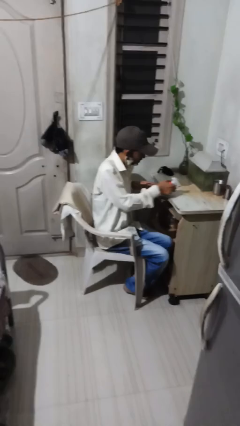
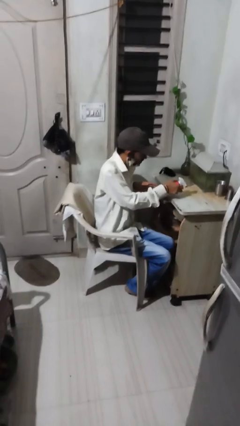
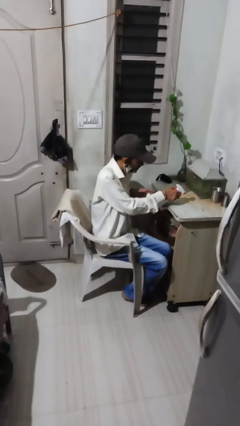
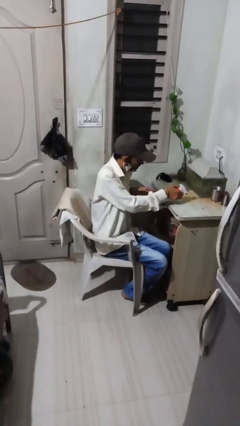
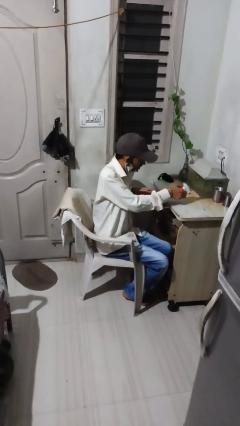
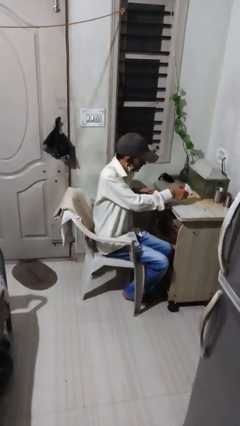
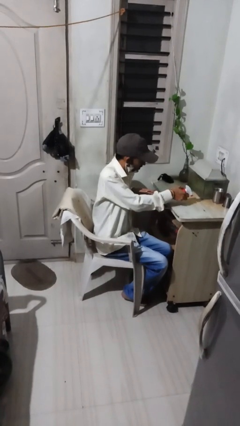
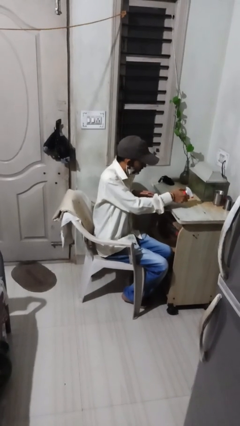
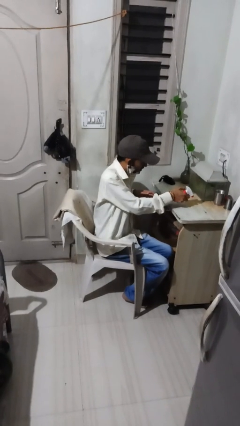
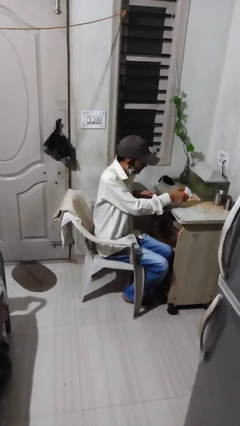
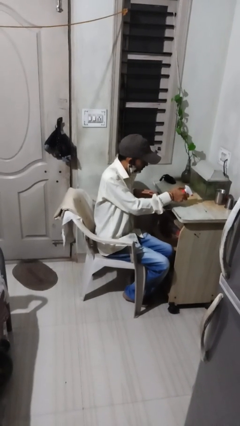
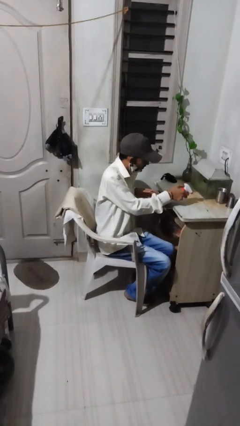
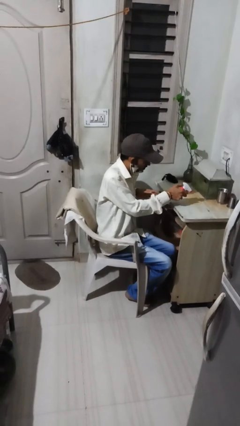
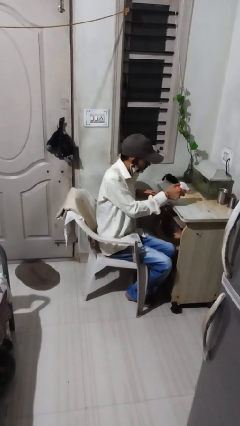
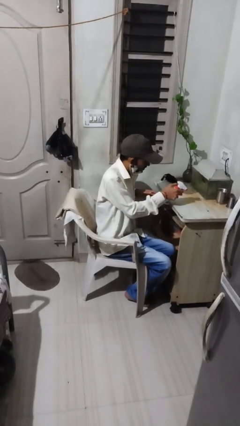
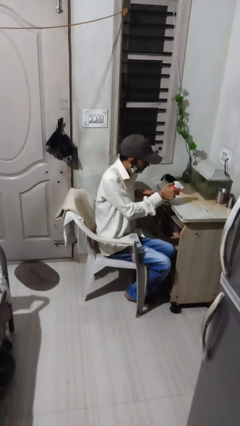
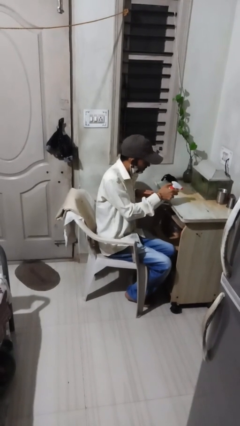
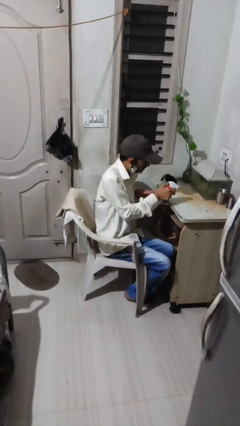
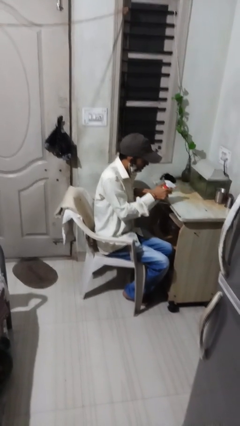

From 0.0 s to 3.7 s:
person sprays from bottle

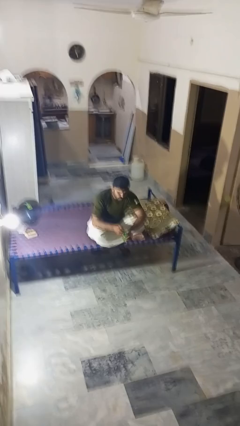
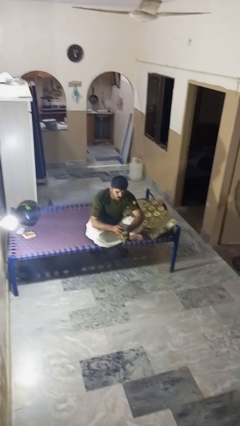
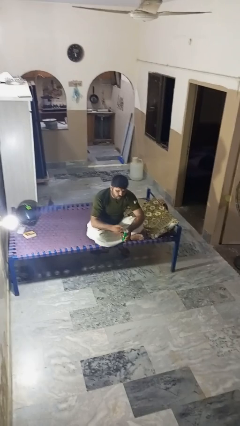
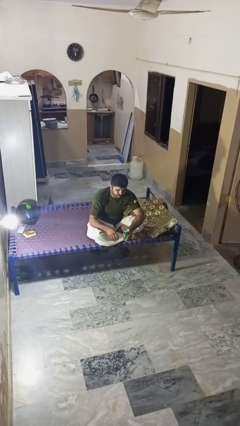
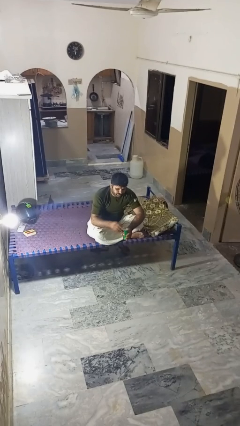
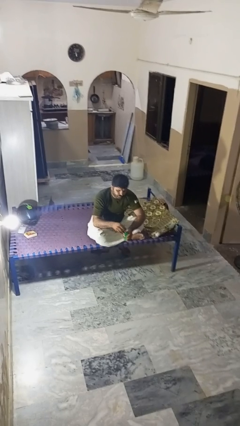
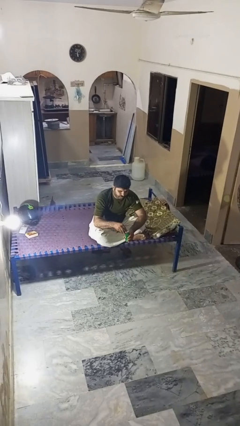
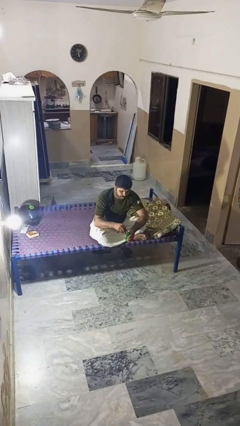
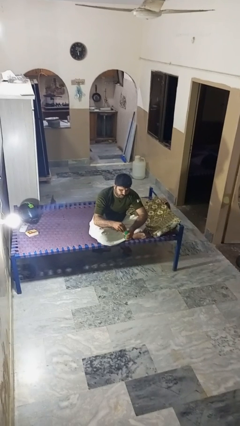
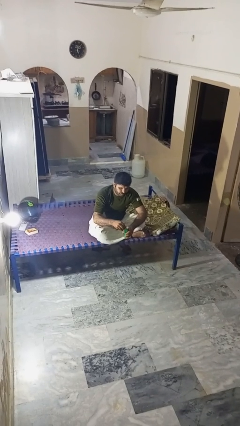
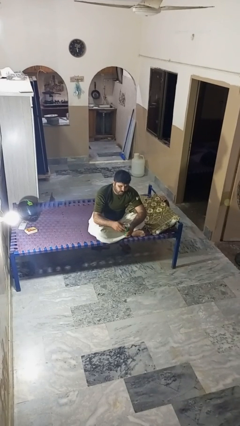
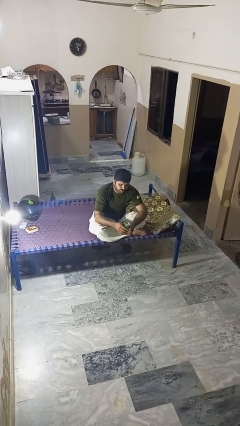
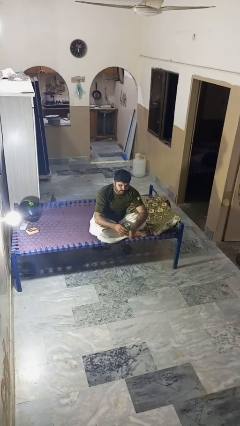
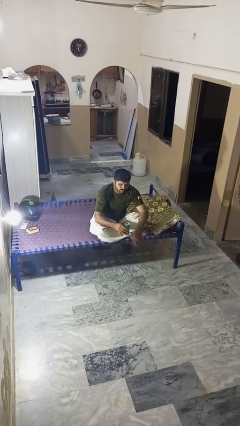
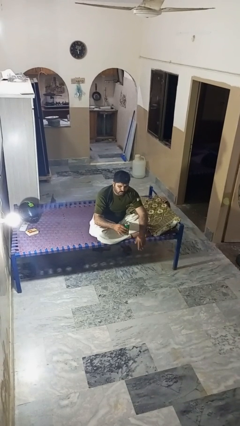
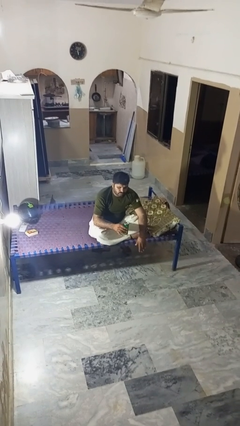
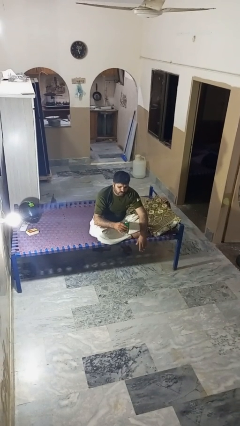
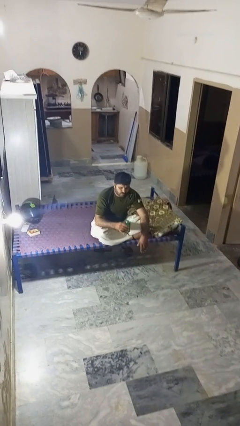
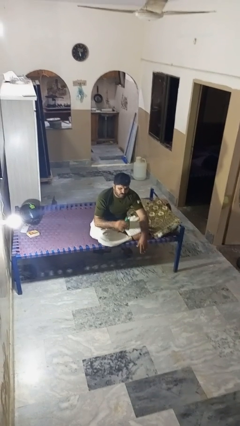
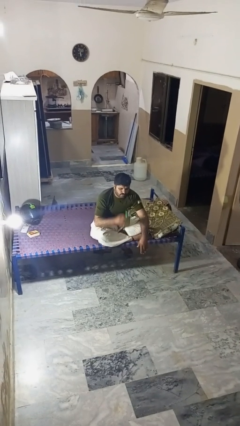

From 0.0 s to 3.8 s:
person opens beverage can

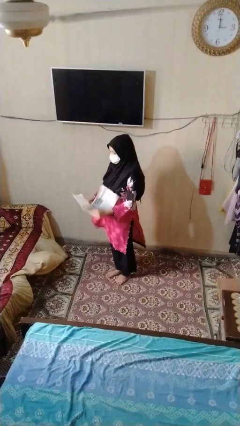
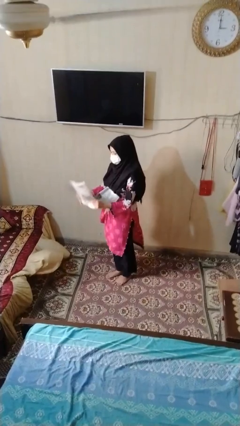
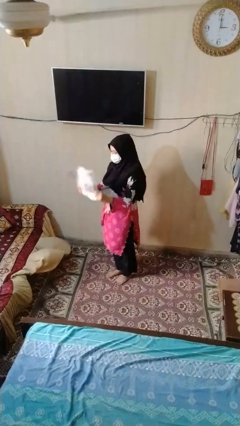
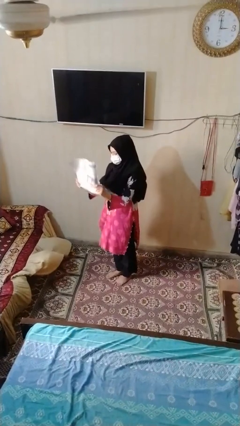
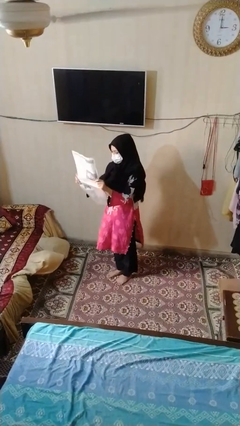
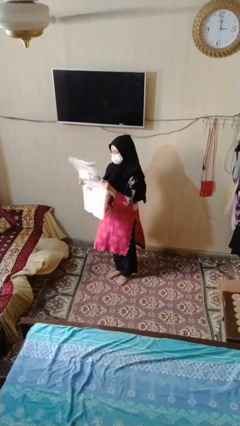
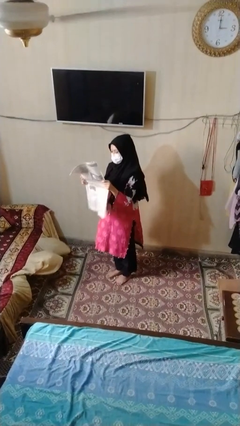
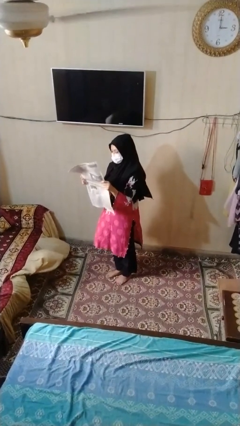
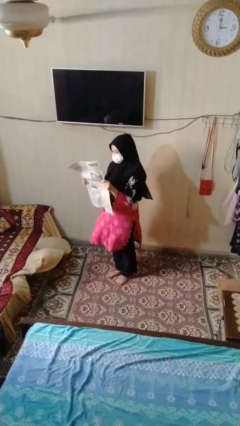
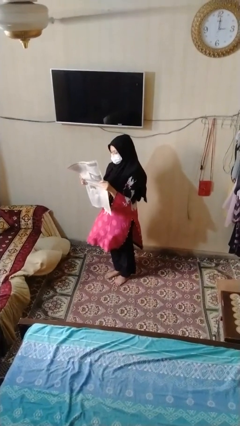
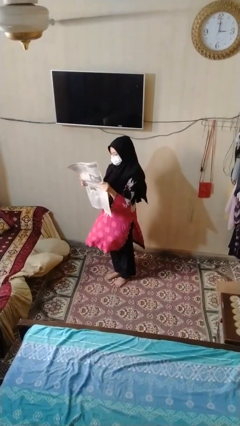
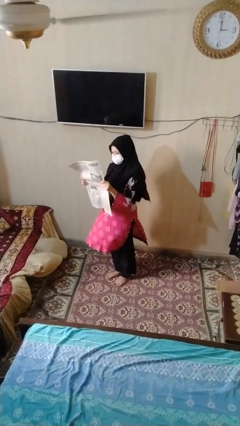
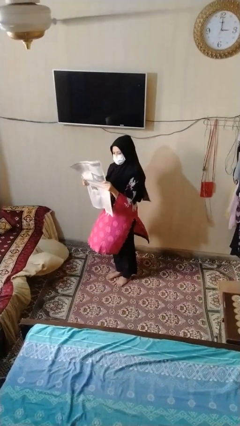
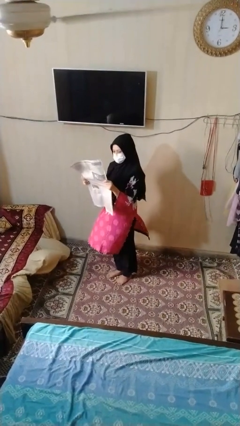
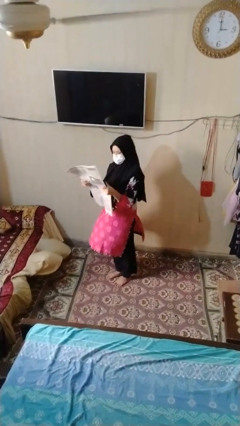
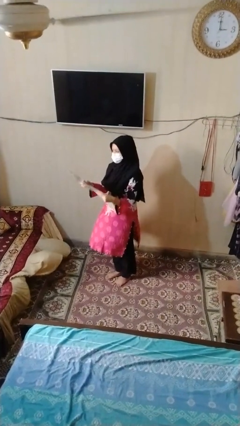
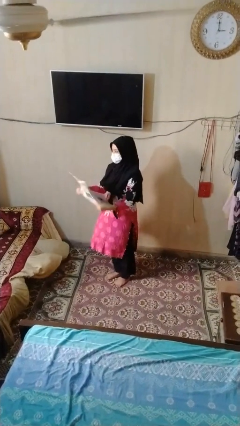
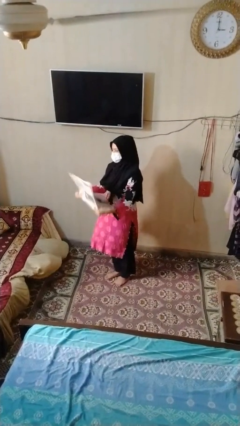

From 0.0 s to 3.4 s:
person reads newspaper

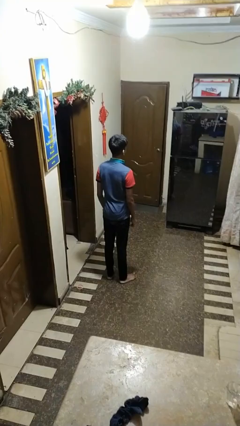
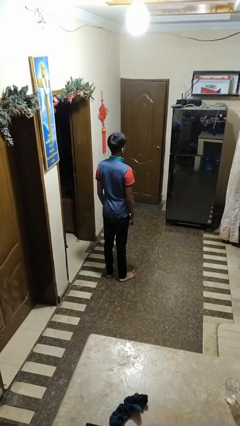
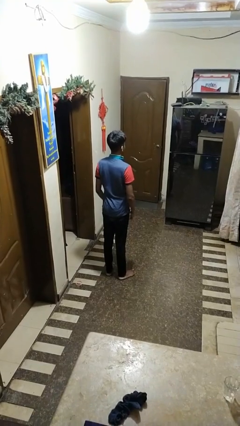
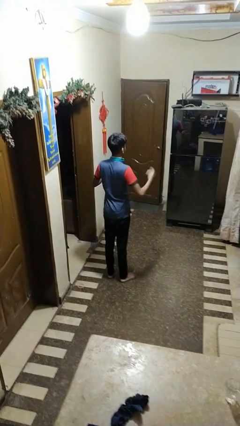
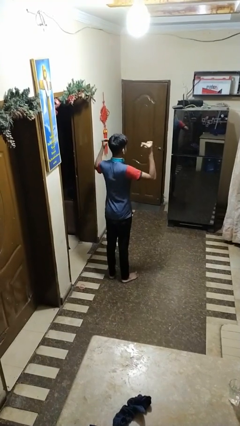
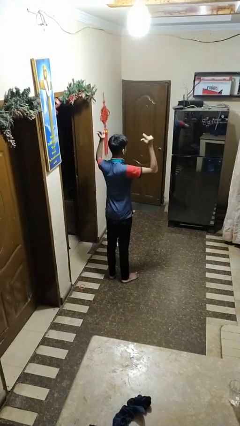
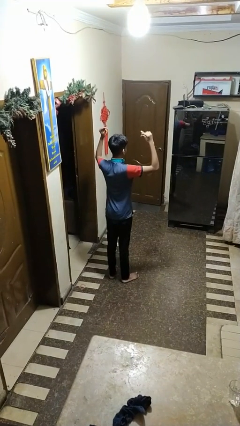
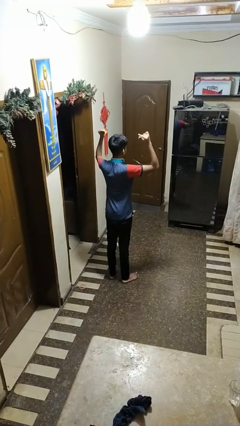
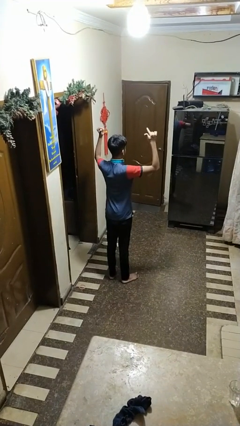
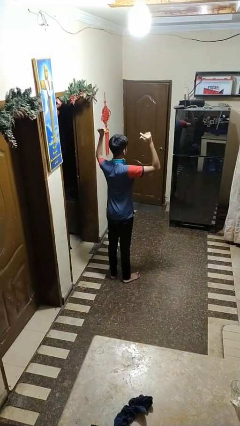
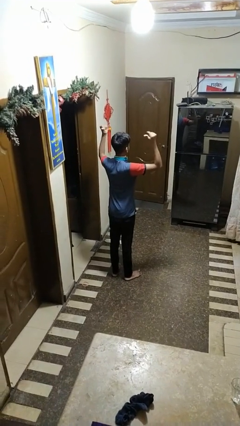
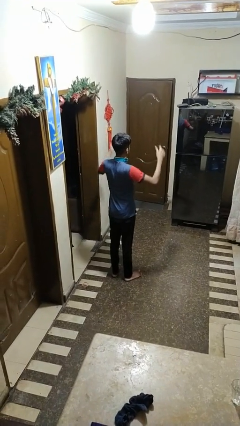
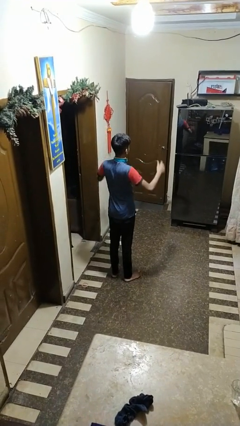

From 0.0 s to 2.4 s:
person snaps fingers

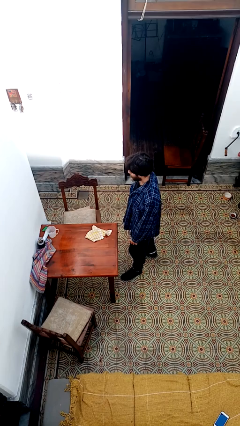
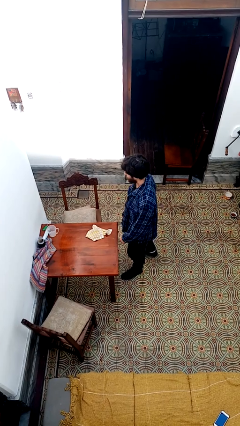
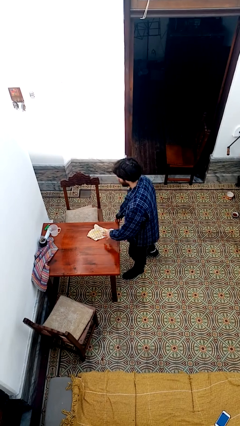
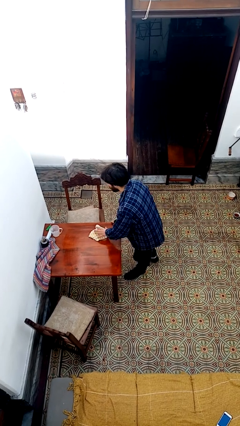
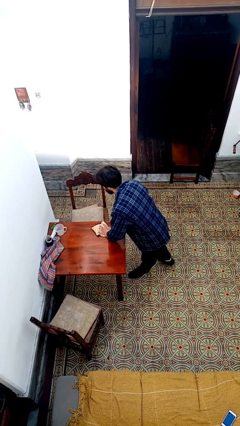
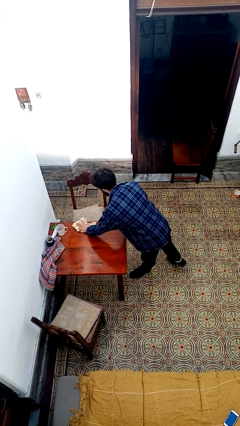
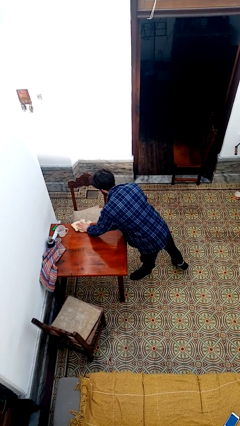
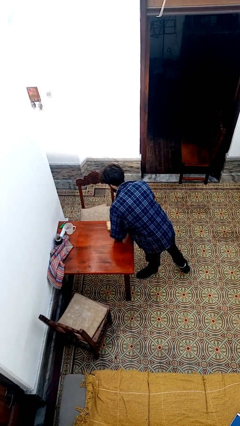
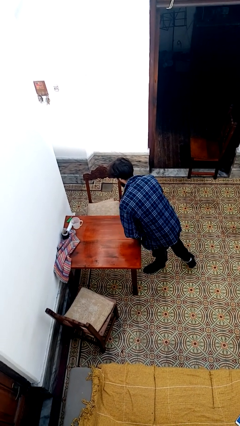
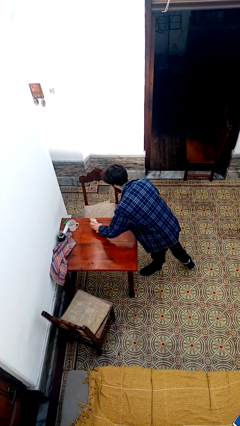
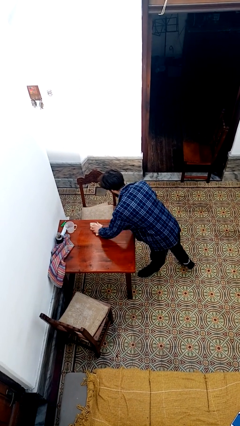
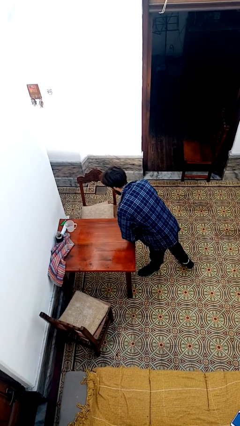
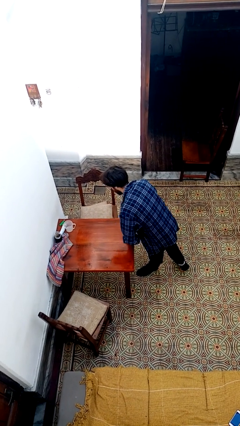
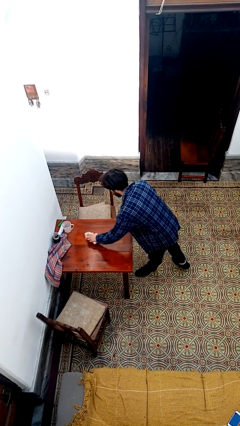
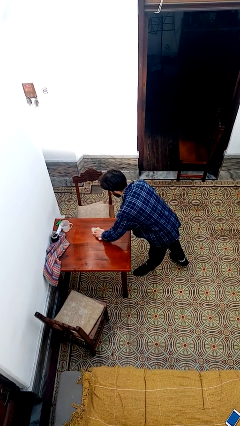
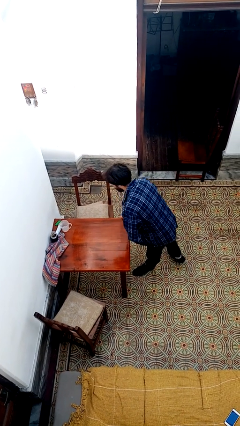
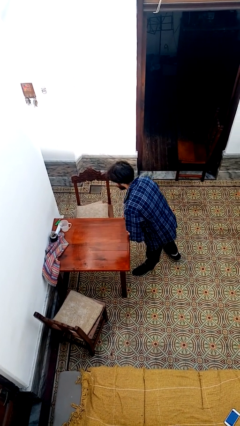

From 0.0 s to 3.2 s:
person cleans table with rag

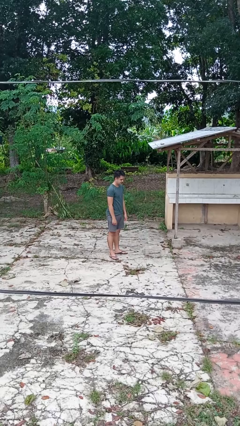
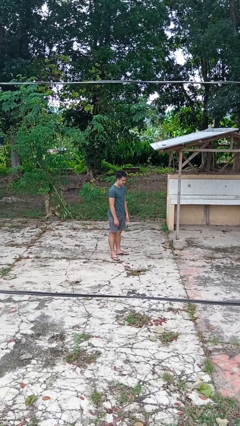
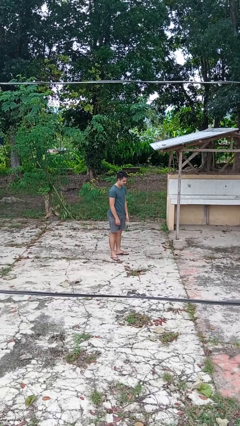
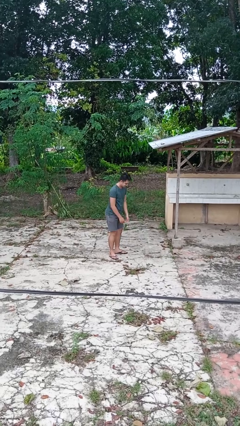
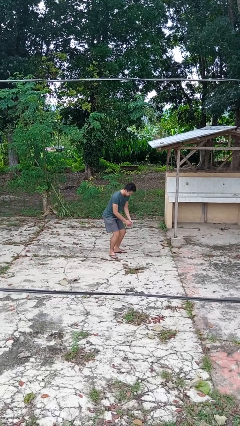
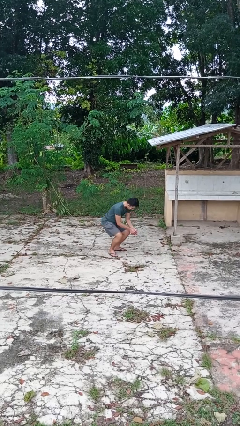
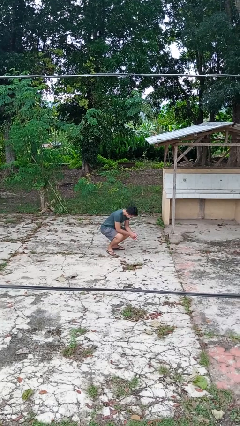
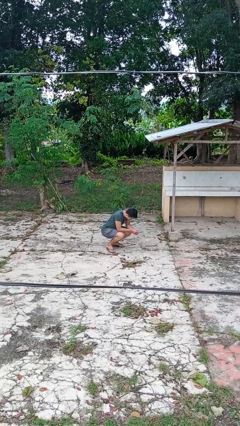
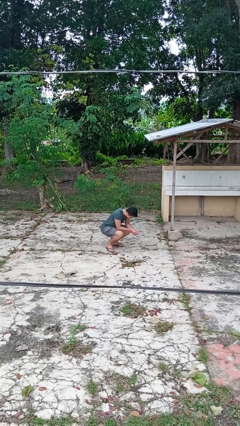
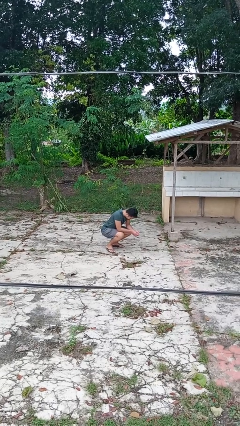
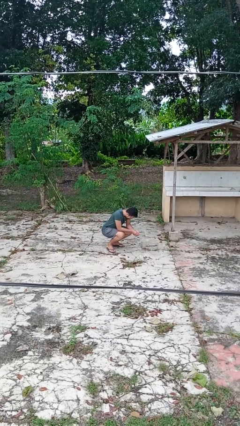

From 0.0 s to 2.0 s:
person squats
